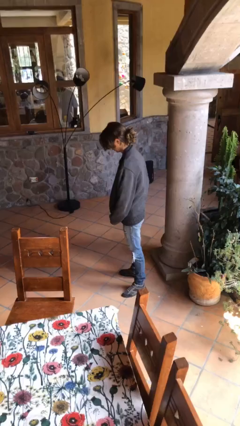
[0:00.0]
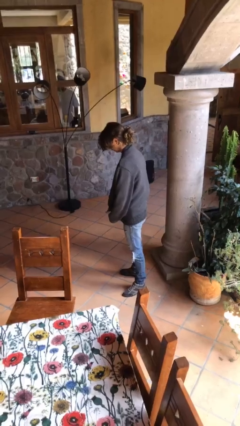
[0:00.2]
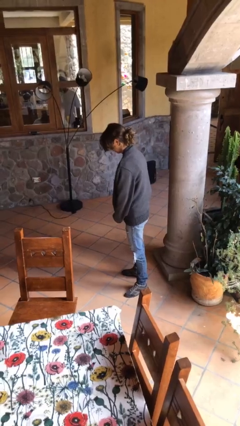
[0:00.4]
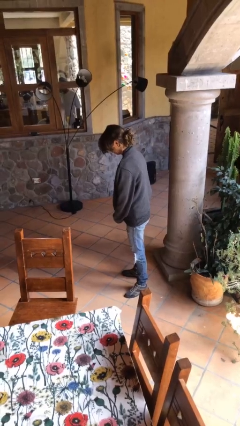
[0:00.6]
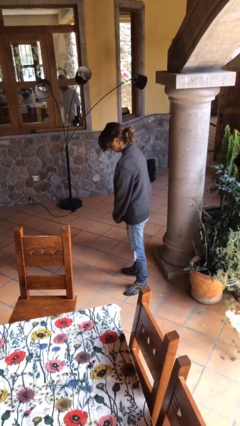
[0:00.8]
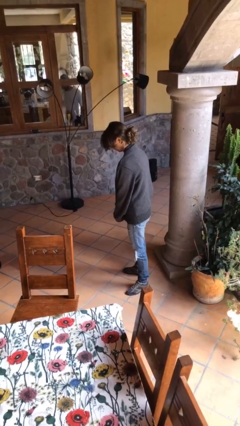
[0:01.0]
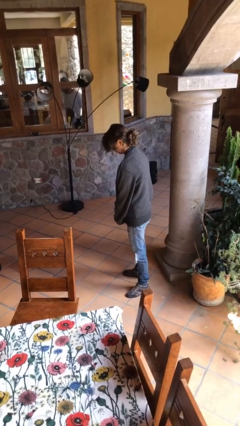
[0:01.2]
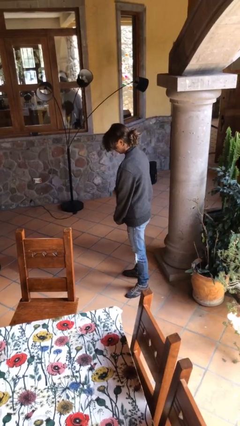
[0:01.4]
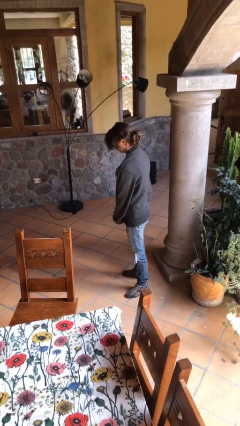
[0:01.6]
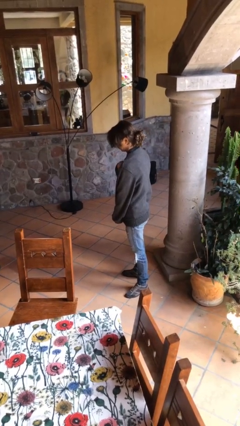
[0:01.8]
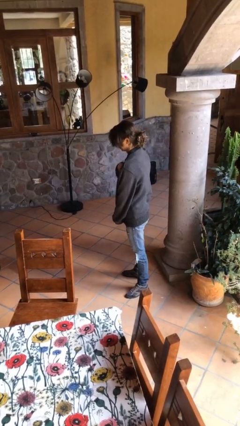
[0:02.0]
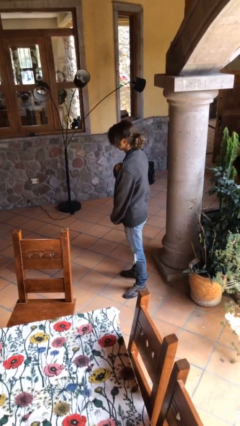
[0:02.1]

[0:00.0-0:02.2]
person zips up jacket

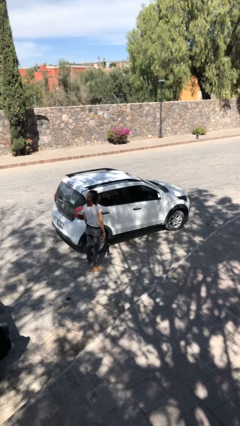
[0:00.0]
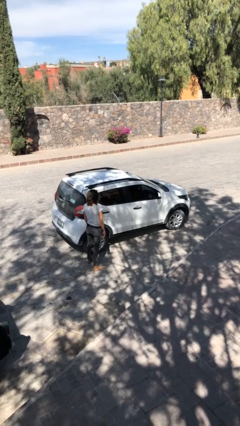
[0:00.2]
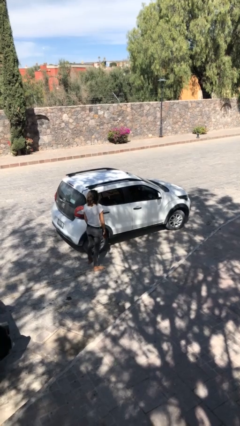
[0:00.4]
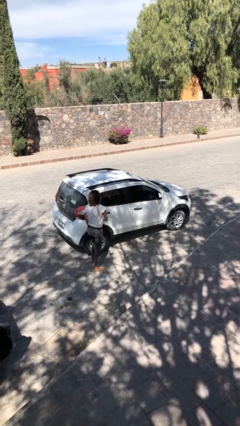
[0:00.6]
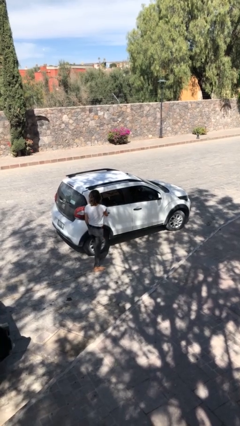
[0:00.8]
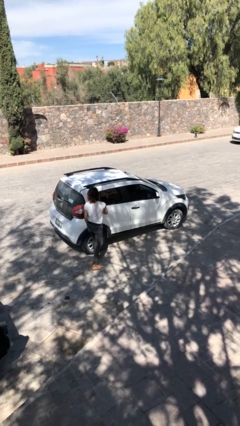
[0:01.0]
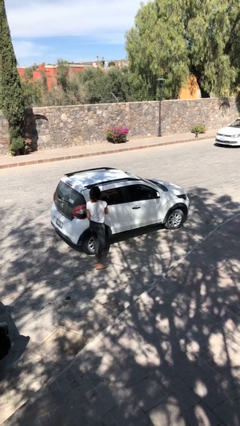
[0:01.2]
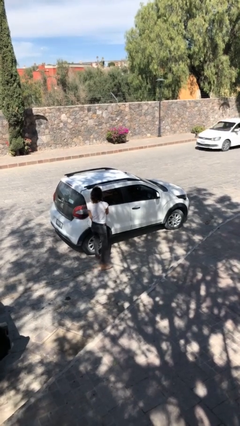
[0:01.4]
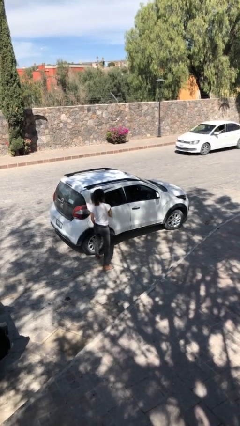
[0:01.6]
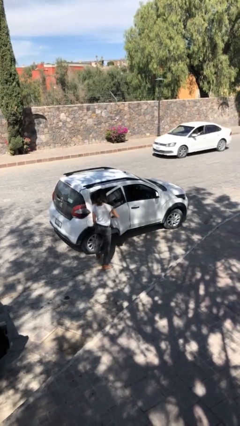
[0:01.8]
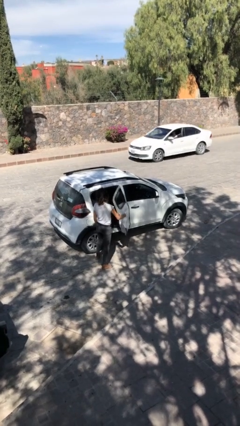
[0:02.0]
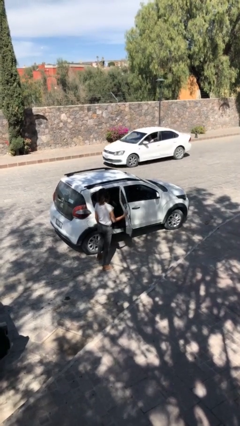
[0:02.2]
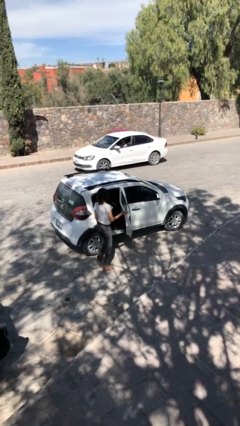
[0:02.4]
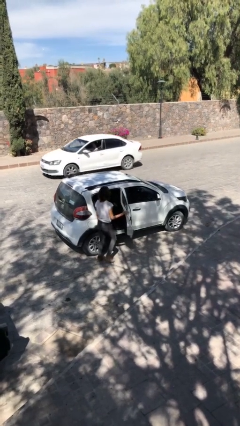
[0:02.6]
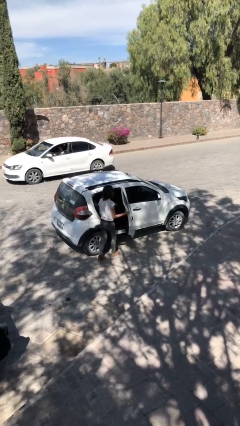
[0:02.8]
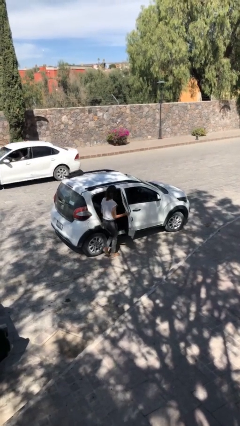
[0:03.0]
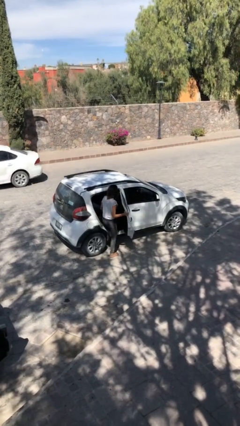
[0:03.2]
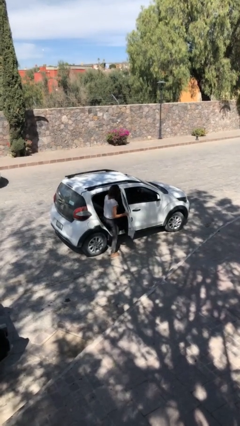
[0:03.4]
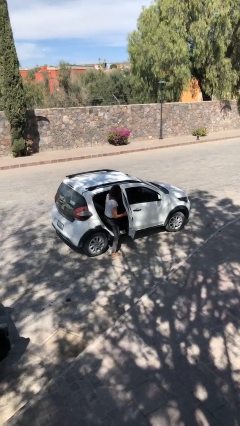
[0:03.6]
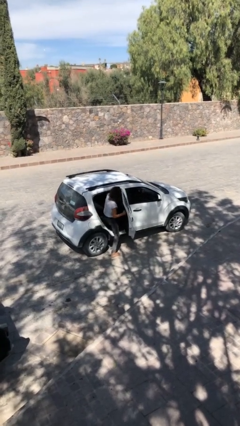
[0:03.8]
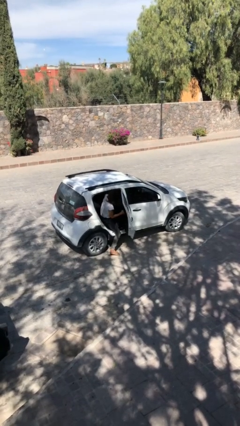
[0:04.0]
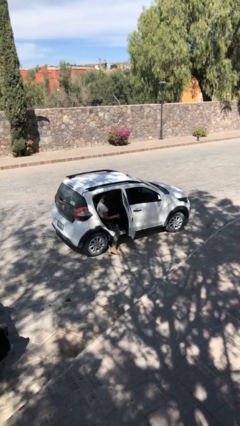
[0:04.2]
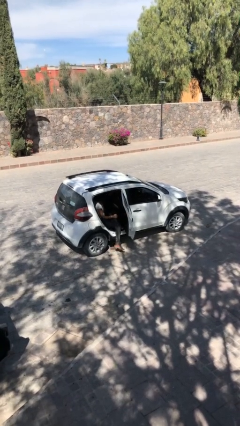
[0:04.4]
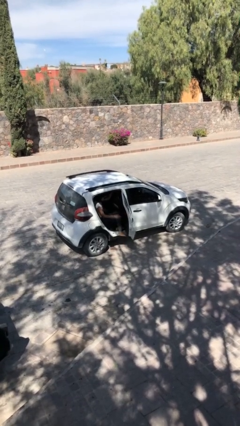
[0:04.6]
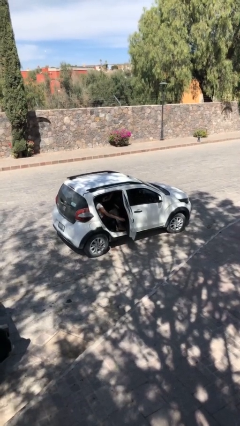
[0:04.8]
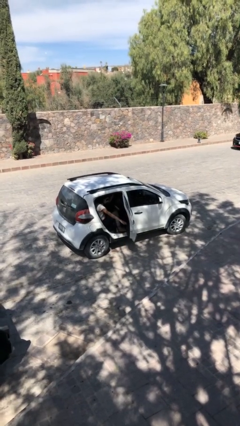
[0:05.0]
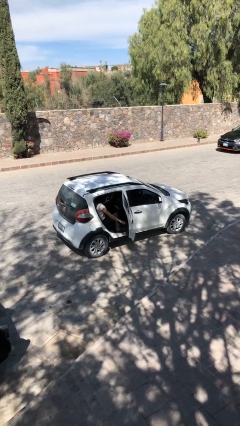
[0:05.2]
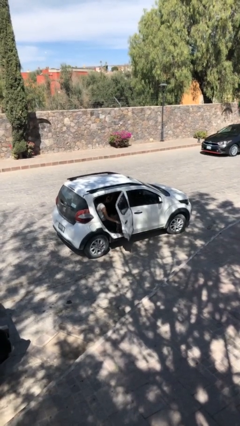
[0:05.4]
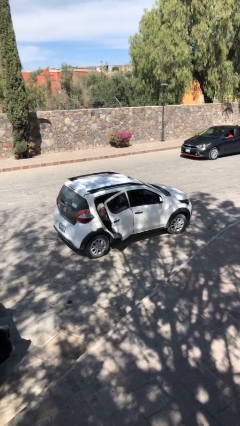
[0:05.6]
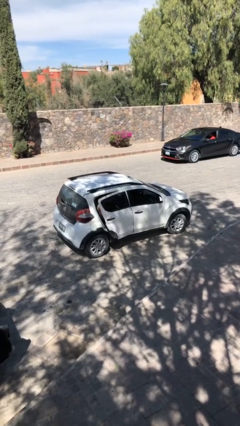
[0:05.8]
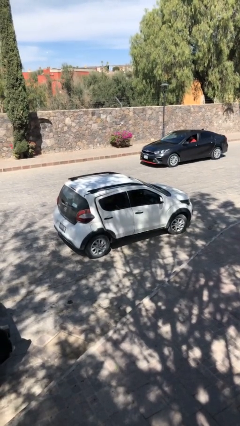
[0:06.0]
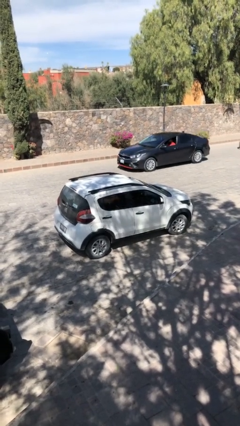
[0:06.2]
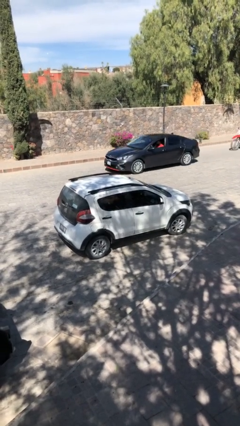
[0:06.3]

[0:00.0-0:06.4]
car picks up person

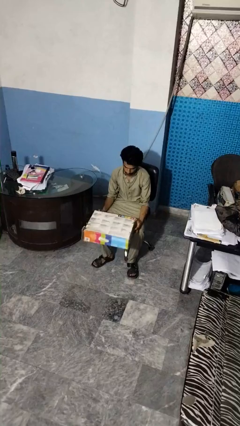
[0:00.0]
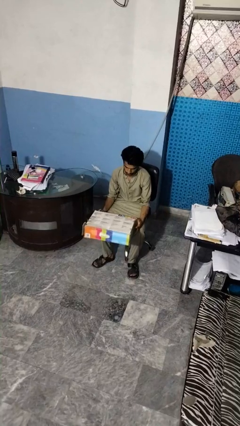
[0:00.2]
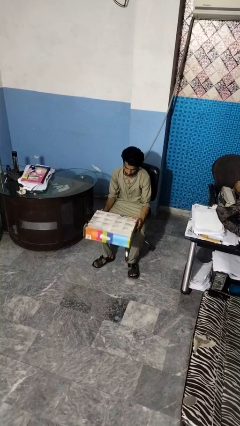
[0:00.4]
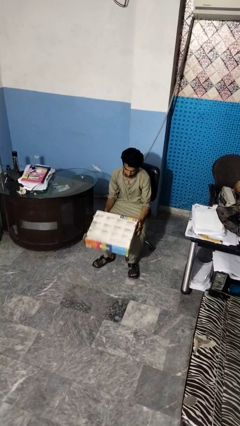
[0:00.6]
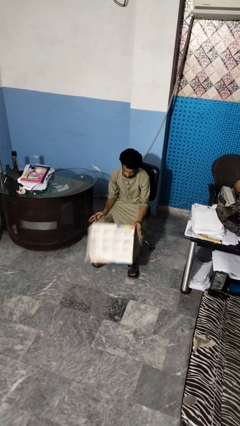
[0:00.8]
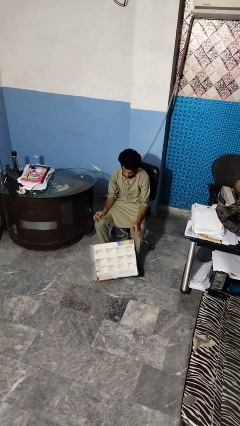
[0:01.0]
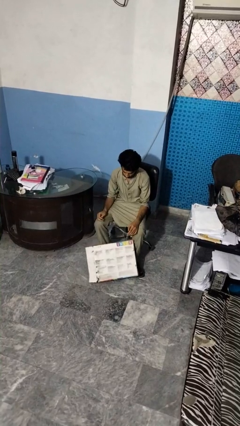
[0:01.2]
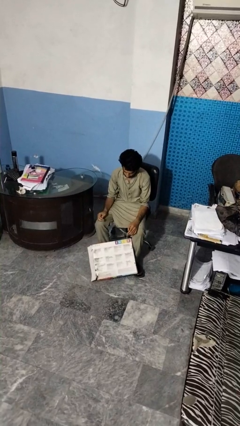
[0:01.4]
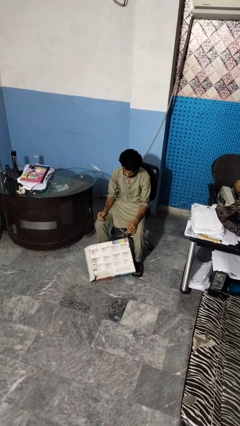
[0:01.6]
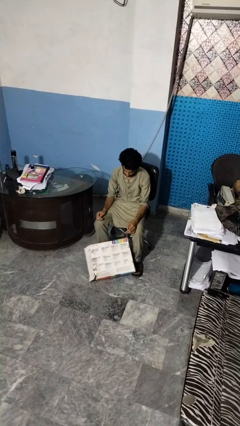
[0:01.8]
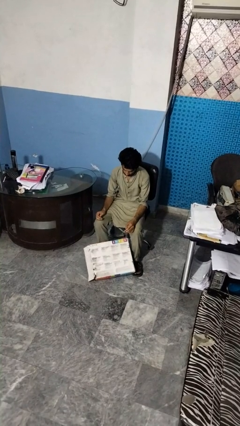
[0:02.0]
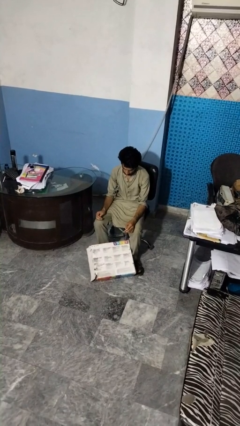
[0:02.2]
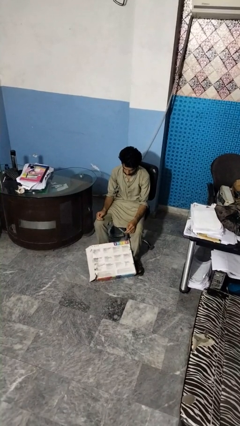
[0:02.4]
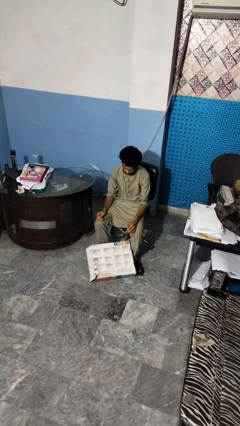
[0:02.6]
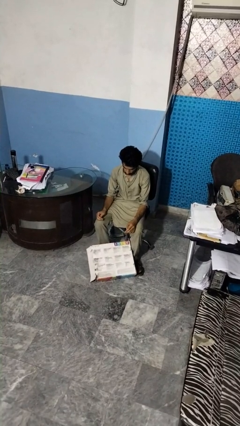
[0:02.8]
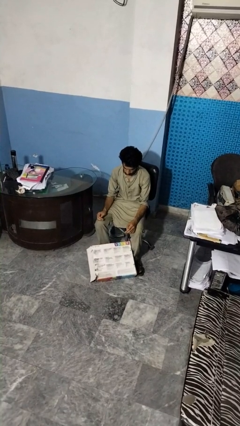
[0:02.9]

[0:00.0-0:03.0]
person drops object

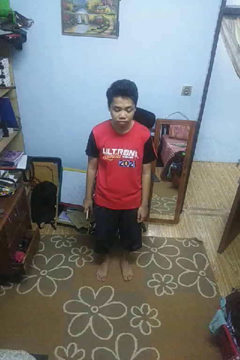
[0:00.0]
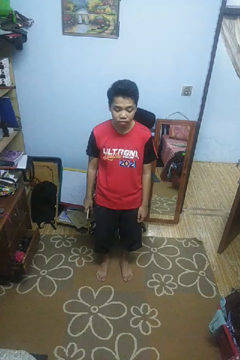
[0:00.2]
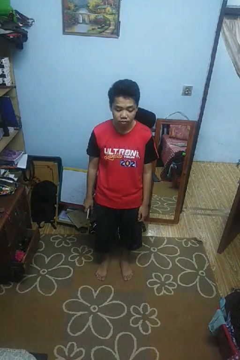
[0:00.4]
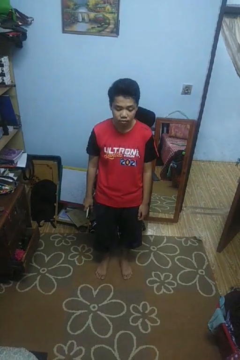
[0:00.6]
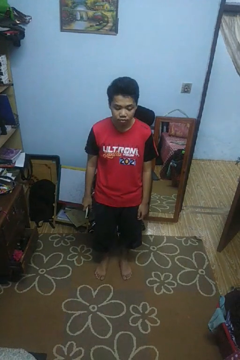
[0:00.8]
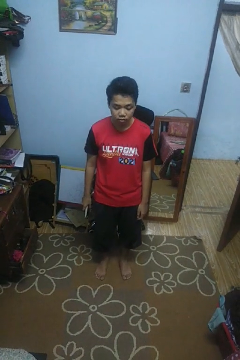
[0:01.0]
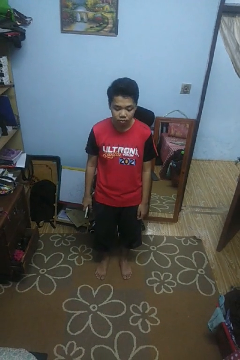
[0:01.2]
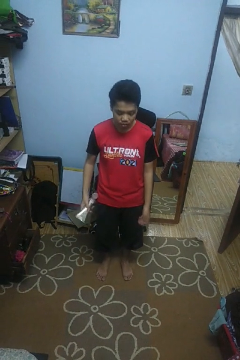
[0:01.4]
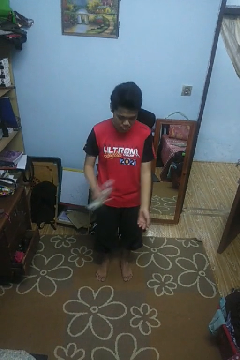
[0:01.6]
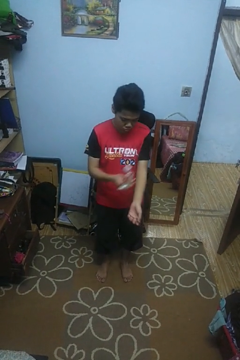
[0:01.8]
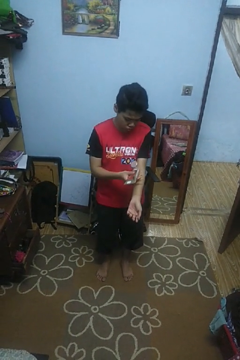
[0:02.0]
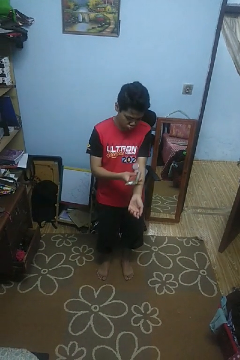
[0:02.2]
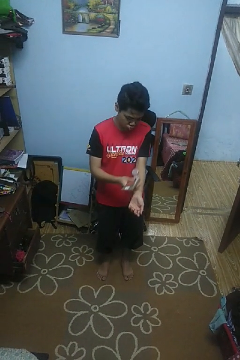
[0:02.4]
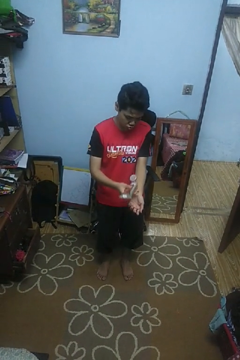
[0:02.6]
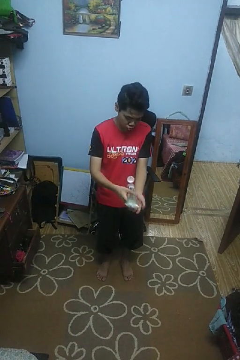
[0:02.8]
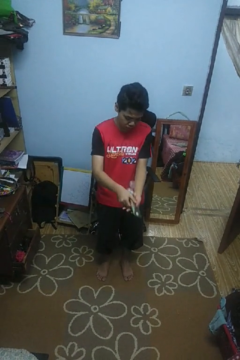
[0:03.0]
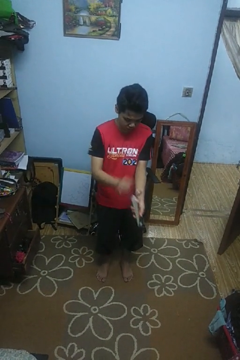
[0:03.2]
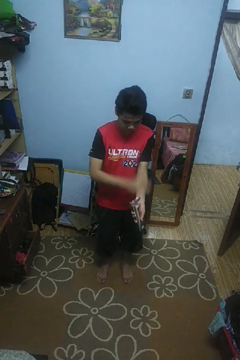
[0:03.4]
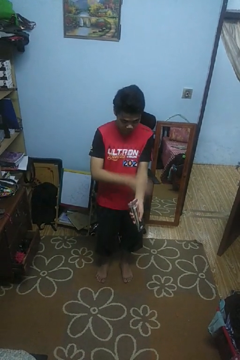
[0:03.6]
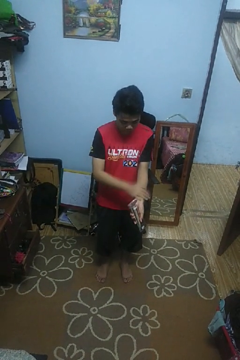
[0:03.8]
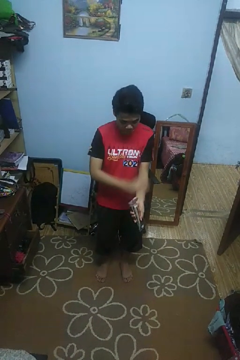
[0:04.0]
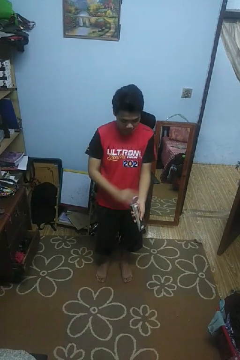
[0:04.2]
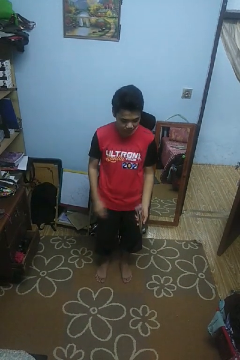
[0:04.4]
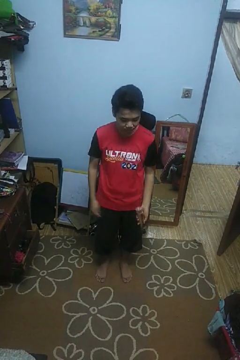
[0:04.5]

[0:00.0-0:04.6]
person applies sunscreen

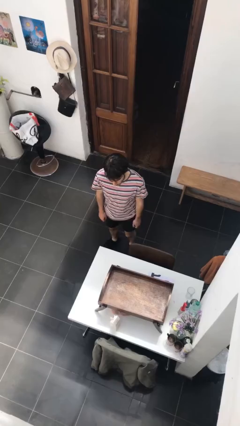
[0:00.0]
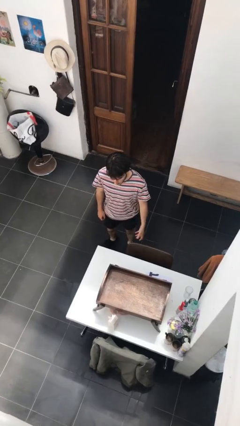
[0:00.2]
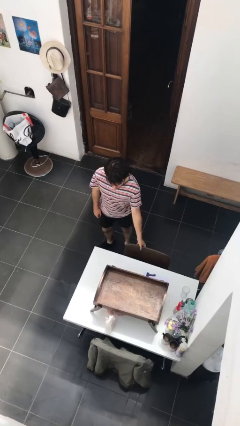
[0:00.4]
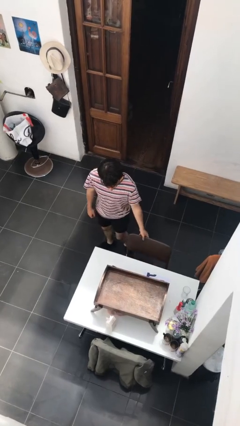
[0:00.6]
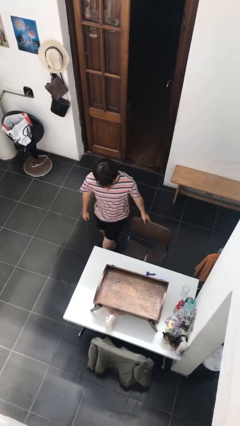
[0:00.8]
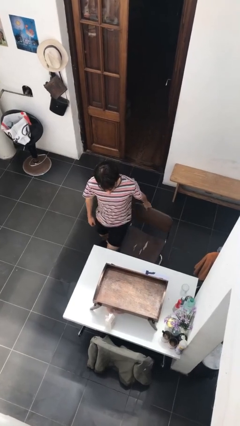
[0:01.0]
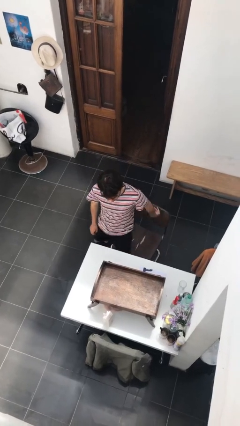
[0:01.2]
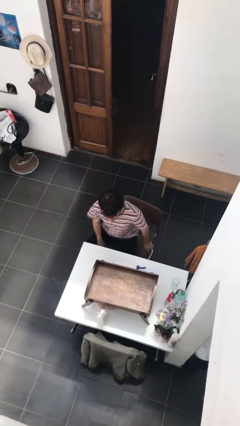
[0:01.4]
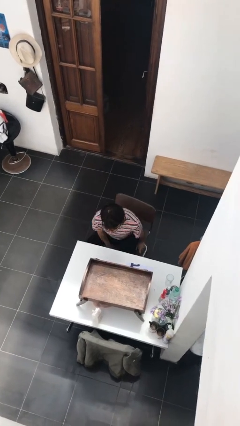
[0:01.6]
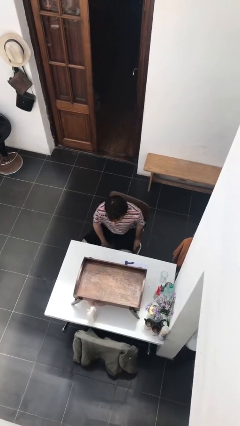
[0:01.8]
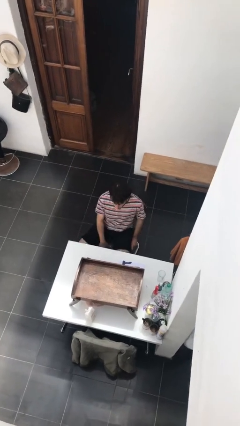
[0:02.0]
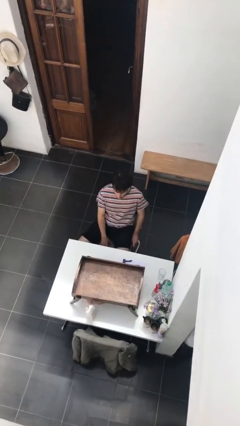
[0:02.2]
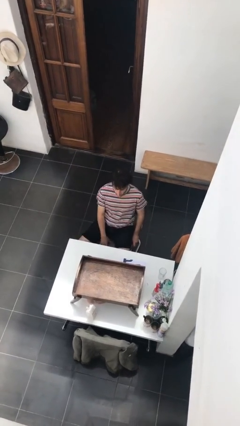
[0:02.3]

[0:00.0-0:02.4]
person sits down
